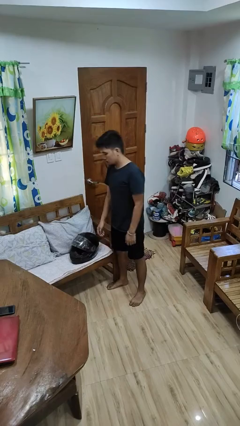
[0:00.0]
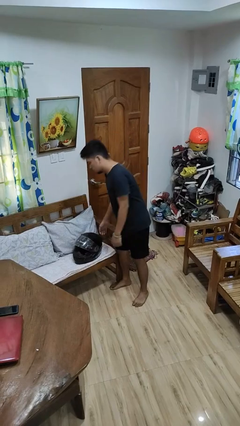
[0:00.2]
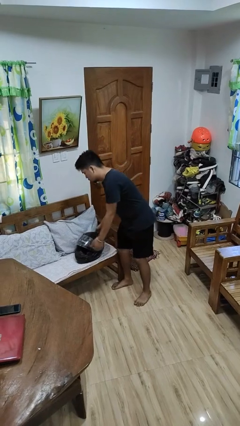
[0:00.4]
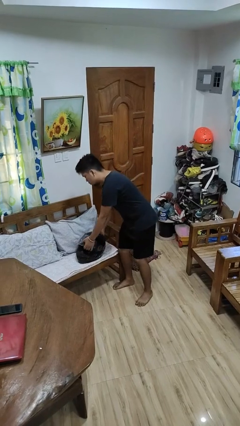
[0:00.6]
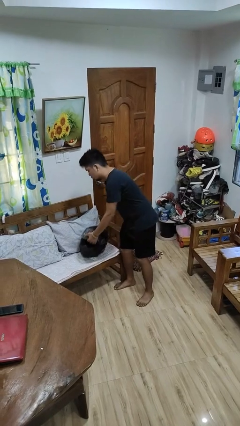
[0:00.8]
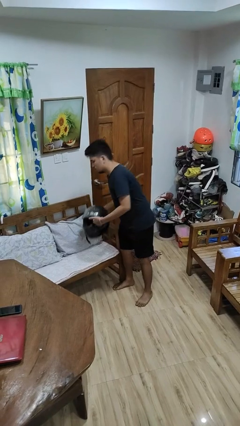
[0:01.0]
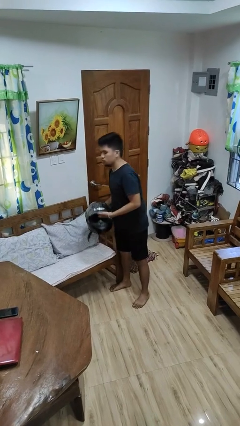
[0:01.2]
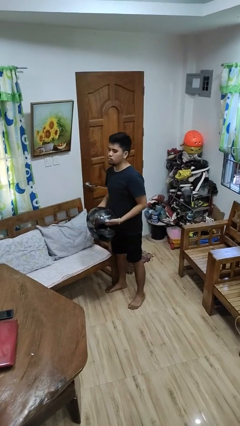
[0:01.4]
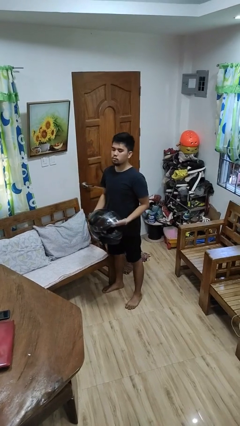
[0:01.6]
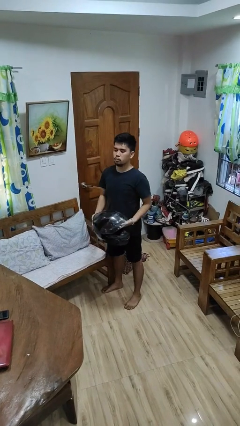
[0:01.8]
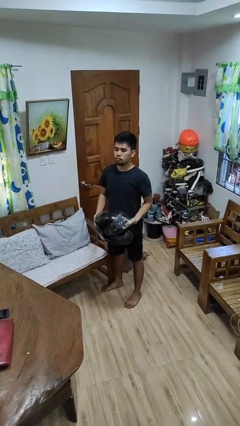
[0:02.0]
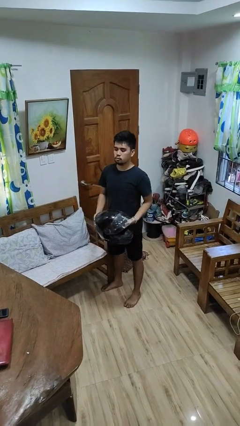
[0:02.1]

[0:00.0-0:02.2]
person picks up object from couch

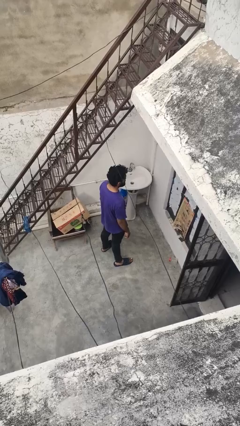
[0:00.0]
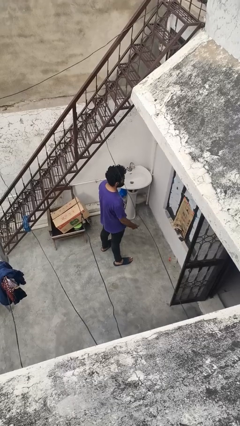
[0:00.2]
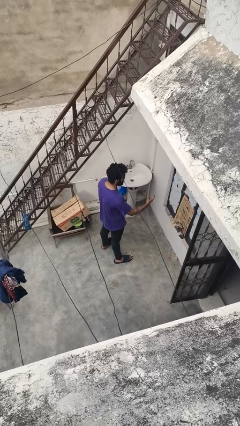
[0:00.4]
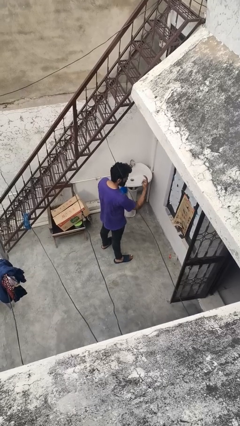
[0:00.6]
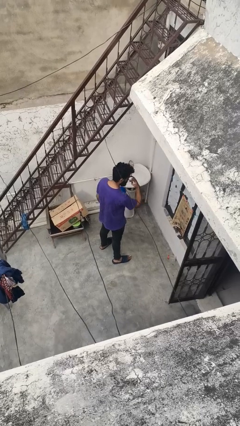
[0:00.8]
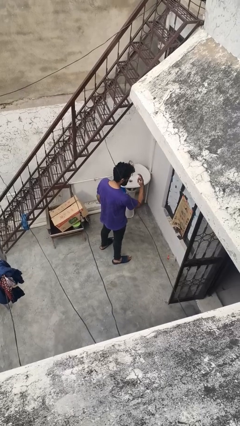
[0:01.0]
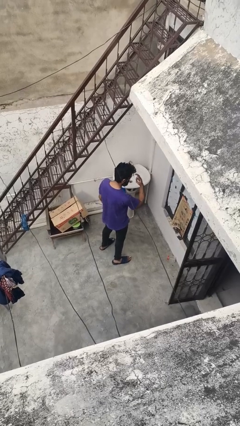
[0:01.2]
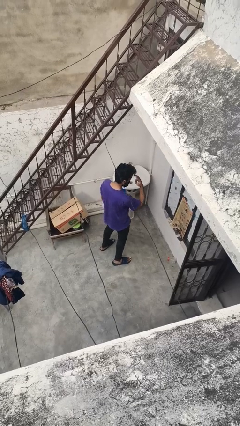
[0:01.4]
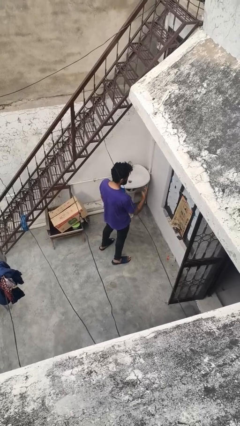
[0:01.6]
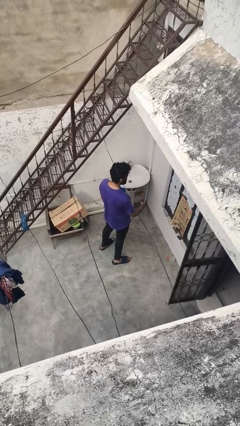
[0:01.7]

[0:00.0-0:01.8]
person gestures watch closely

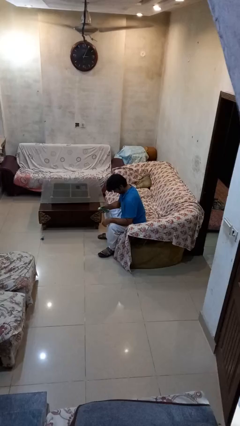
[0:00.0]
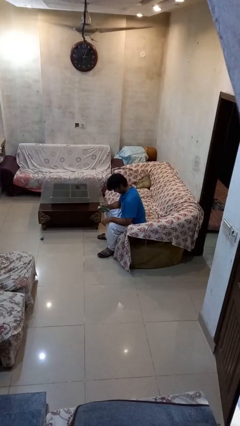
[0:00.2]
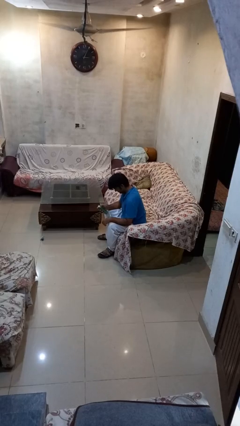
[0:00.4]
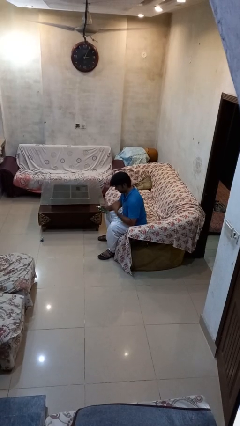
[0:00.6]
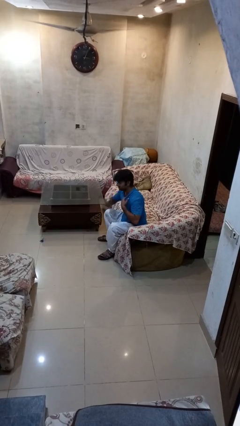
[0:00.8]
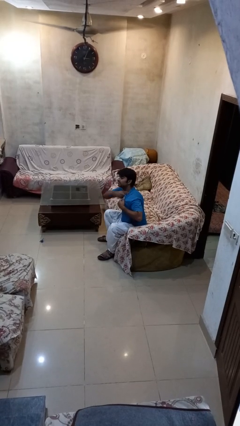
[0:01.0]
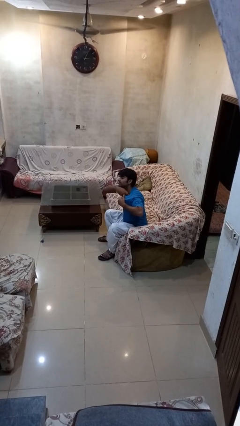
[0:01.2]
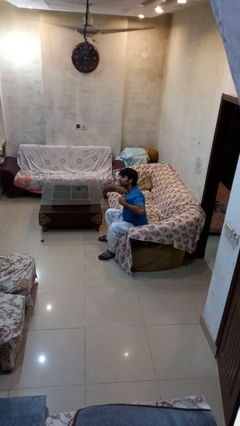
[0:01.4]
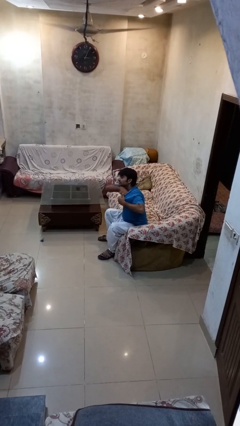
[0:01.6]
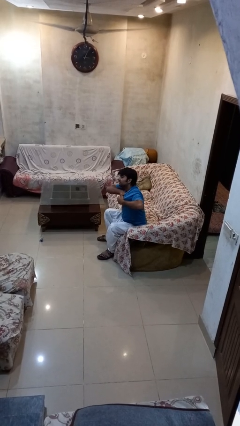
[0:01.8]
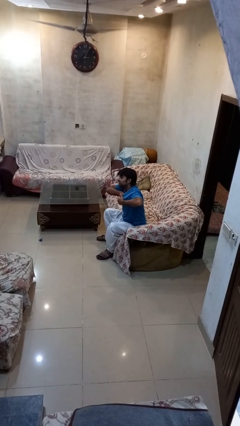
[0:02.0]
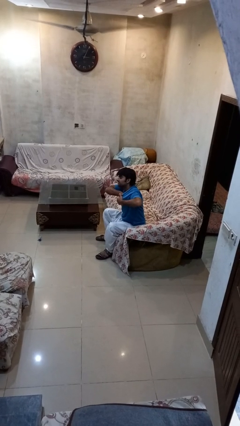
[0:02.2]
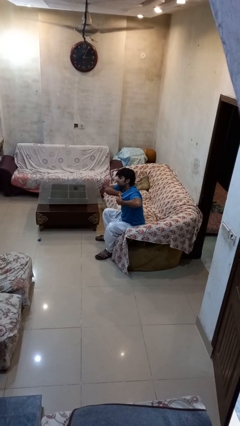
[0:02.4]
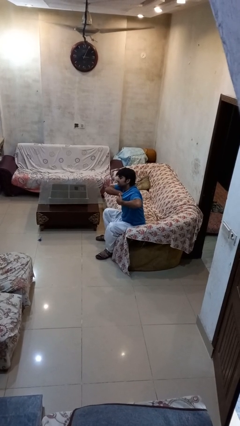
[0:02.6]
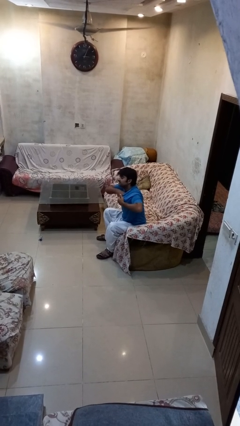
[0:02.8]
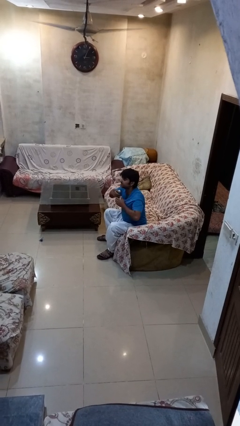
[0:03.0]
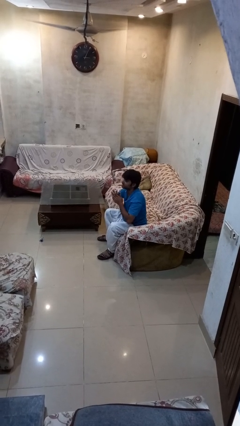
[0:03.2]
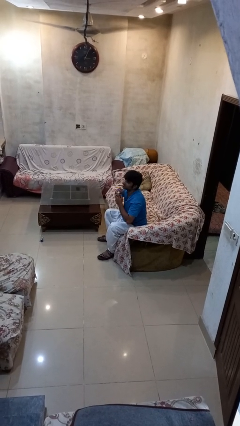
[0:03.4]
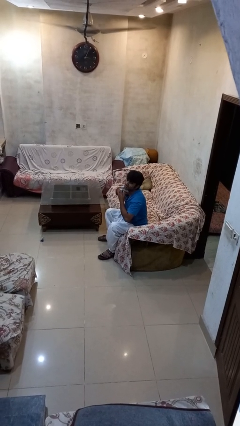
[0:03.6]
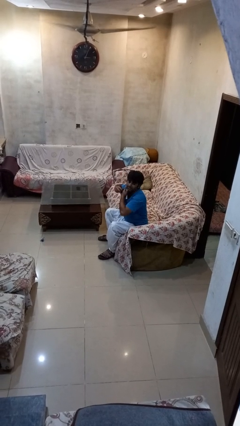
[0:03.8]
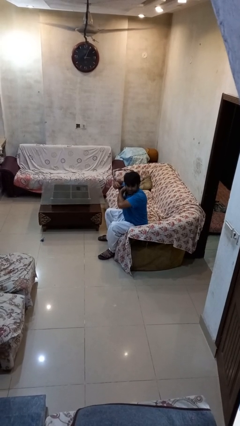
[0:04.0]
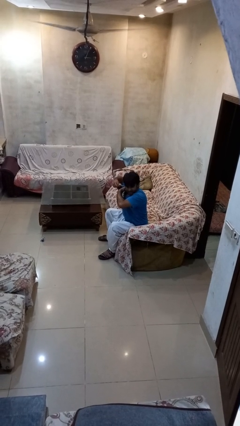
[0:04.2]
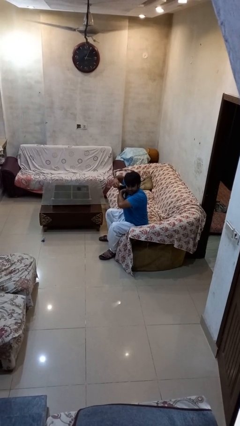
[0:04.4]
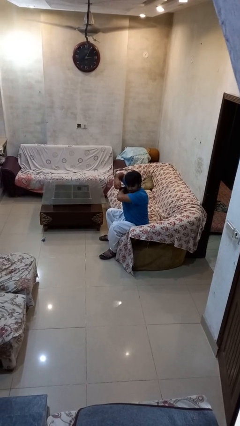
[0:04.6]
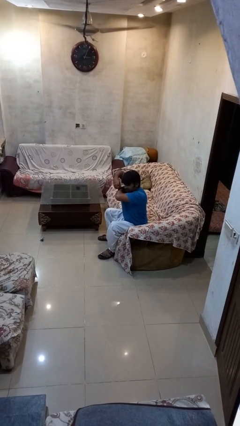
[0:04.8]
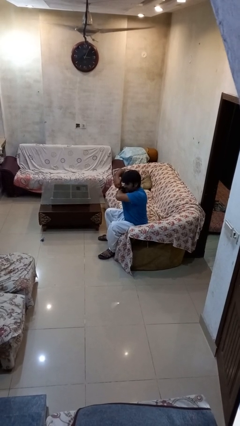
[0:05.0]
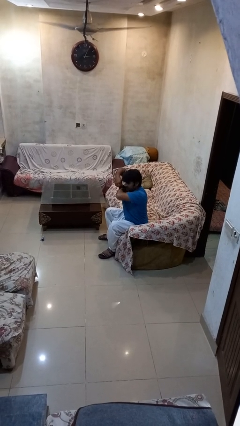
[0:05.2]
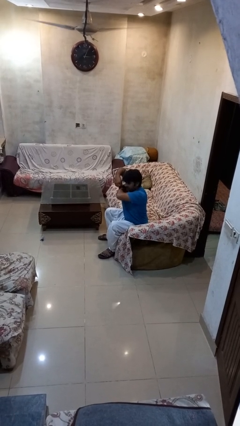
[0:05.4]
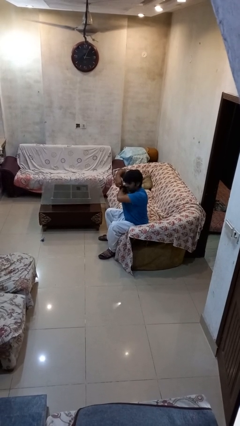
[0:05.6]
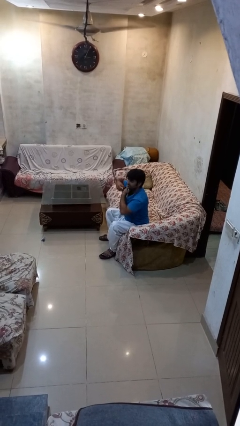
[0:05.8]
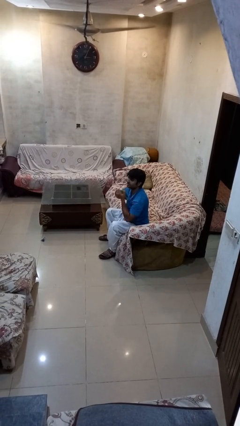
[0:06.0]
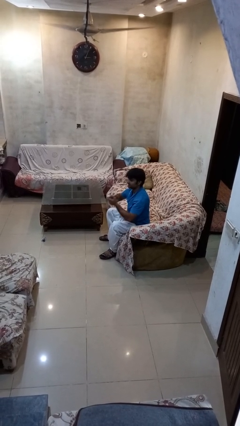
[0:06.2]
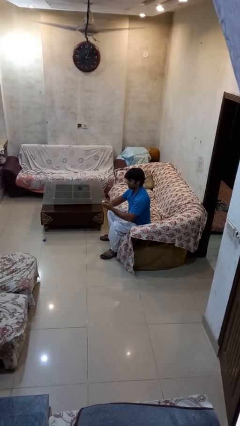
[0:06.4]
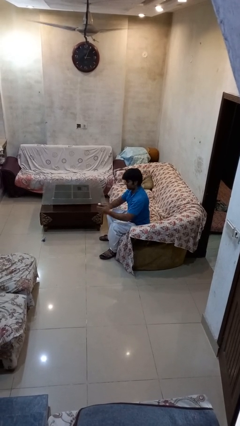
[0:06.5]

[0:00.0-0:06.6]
person applies deodorant

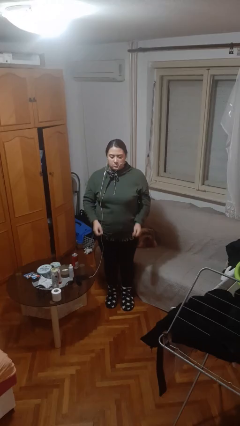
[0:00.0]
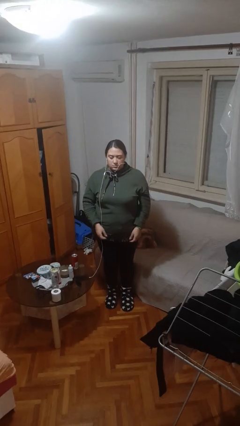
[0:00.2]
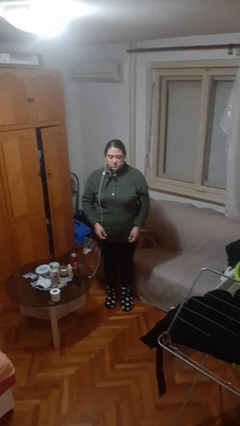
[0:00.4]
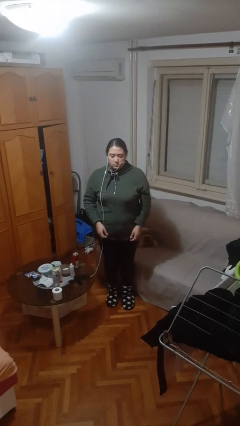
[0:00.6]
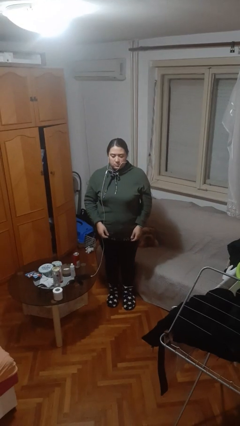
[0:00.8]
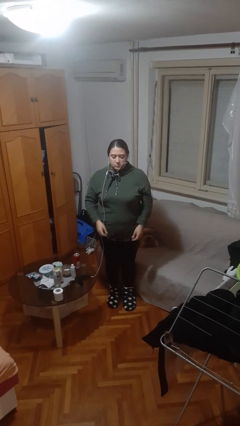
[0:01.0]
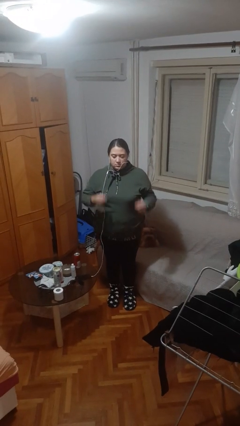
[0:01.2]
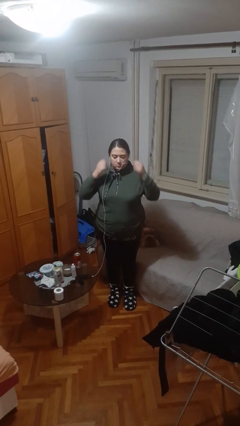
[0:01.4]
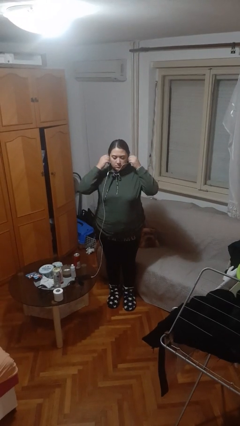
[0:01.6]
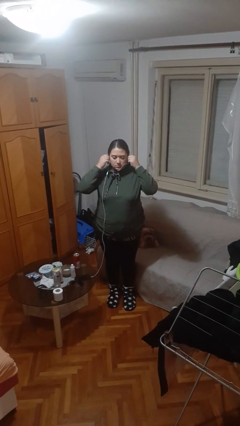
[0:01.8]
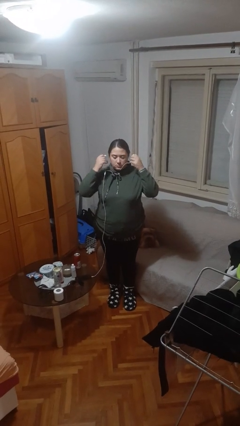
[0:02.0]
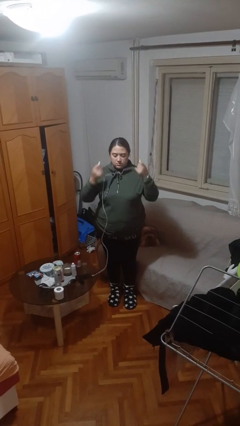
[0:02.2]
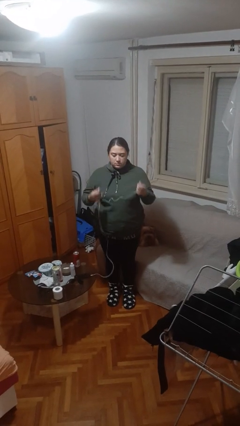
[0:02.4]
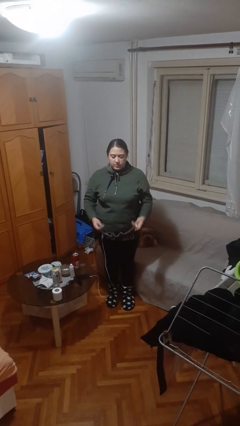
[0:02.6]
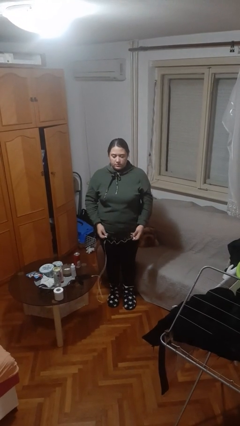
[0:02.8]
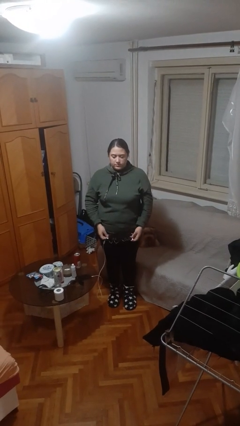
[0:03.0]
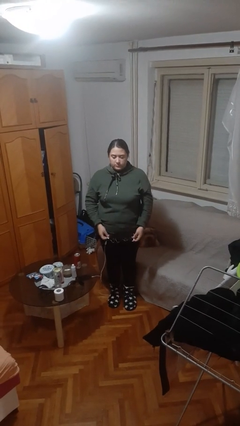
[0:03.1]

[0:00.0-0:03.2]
person takes off headphones

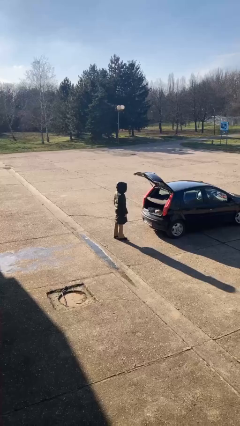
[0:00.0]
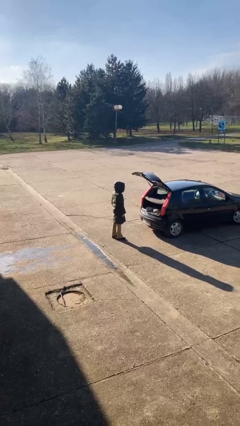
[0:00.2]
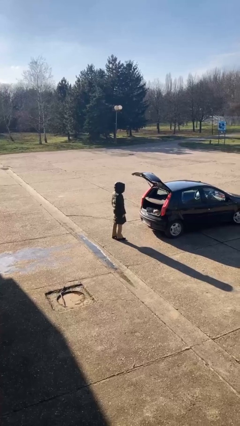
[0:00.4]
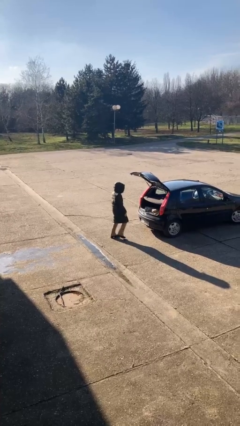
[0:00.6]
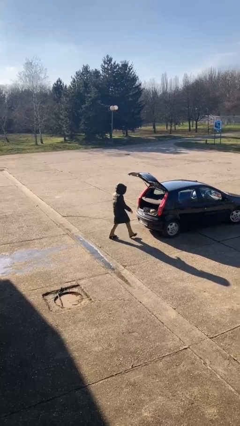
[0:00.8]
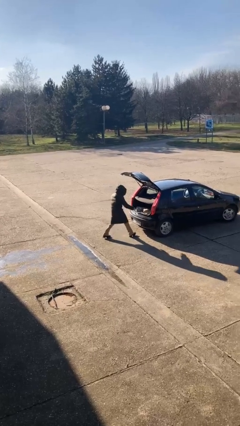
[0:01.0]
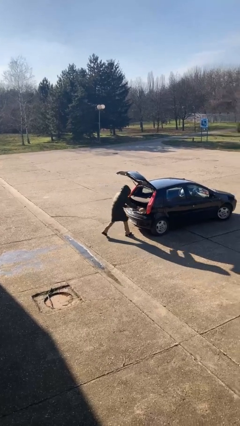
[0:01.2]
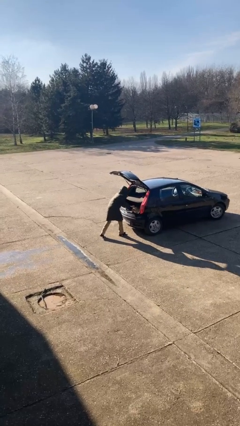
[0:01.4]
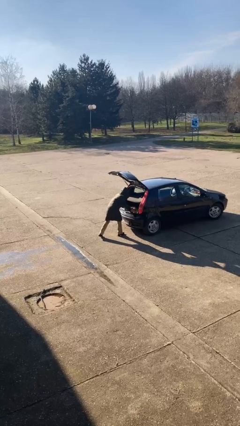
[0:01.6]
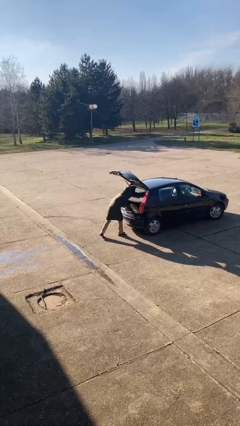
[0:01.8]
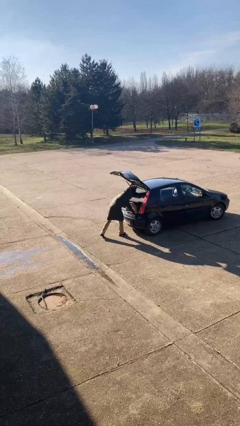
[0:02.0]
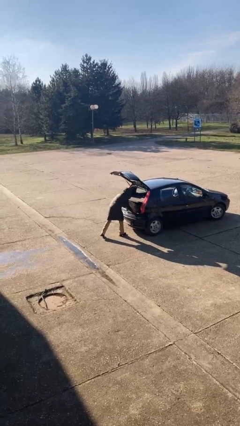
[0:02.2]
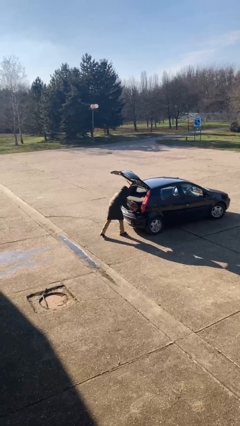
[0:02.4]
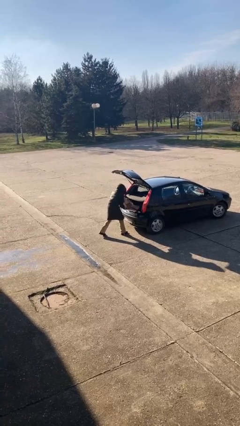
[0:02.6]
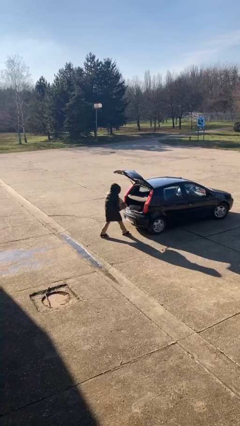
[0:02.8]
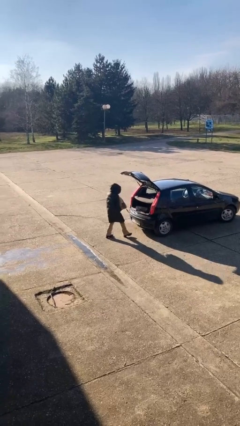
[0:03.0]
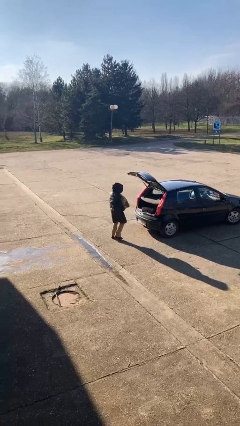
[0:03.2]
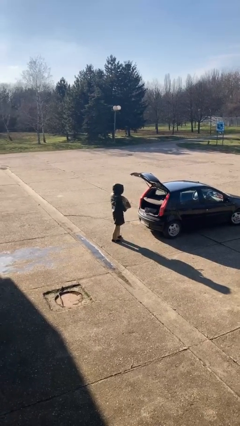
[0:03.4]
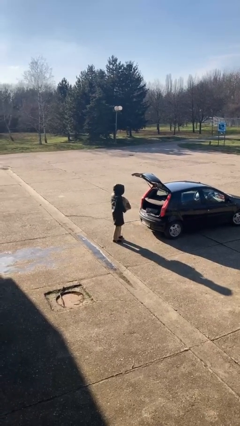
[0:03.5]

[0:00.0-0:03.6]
person unloads car

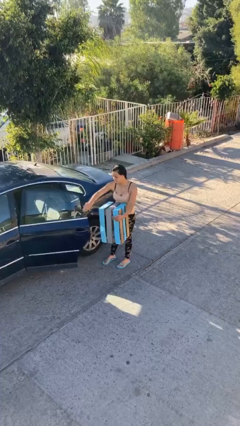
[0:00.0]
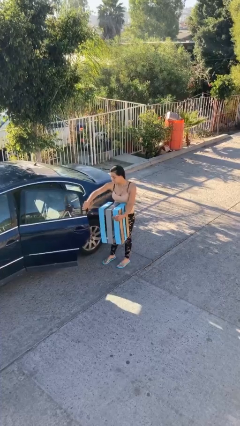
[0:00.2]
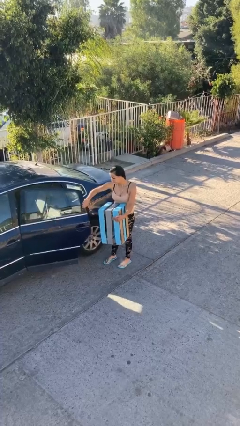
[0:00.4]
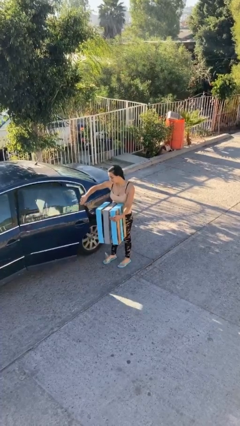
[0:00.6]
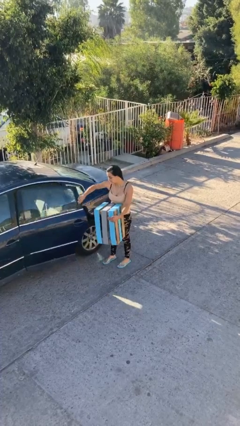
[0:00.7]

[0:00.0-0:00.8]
person closes car door
